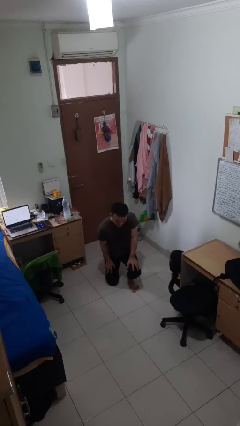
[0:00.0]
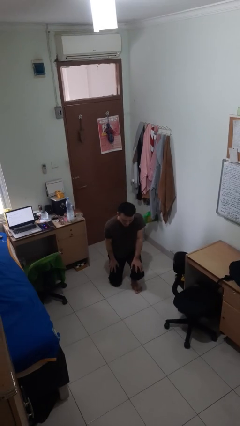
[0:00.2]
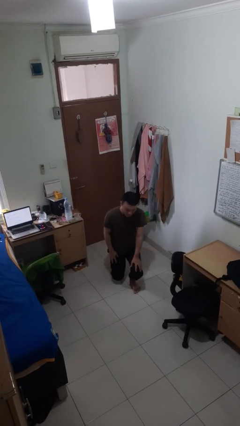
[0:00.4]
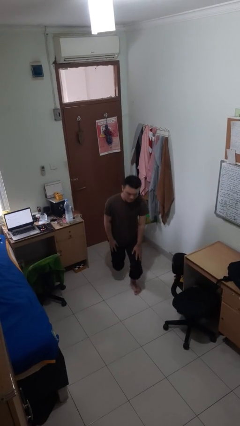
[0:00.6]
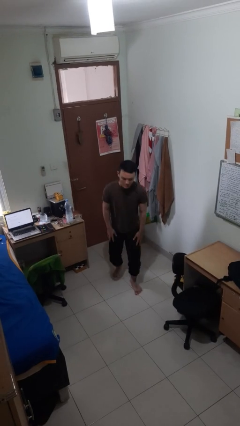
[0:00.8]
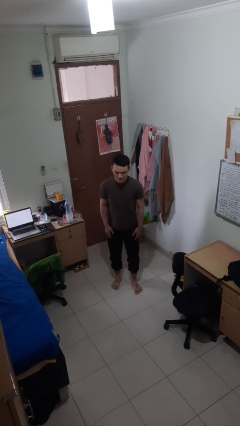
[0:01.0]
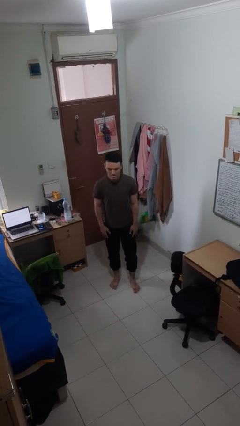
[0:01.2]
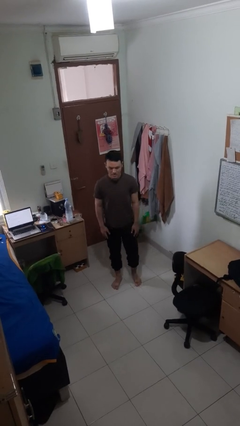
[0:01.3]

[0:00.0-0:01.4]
person stands up from floor

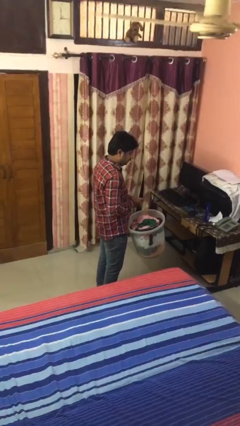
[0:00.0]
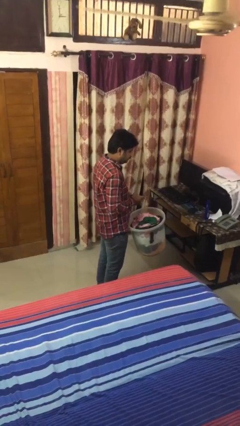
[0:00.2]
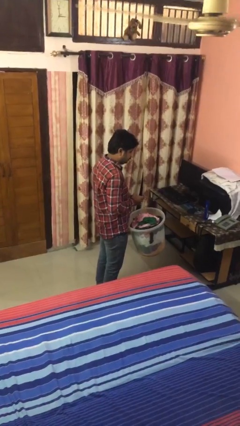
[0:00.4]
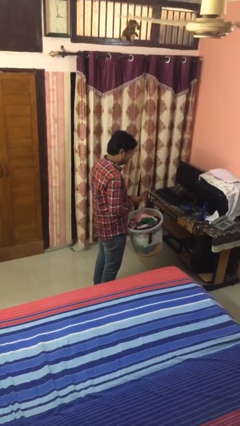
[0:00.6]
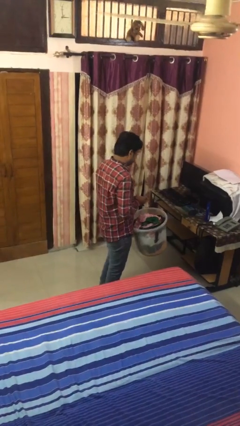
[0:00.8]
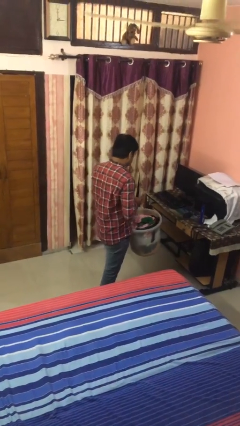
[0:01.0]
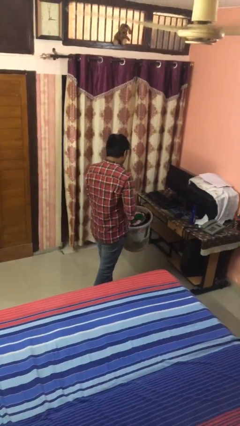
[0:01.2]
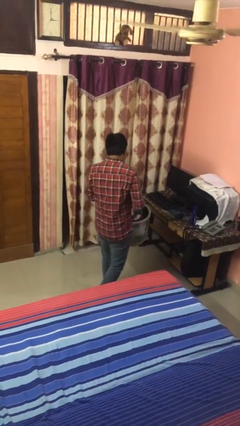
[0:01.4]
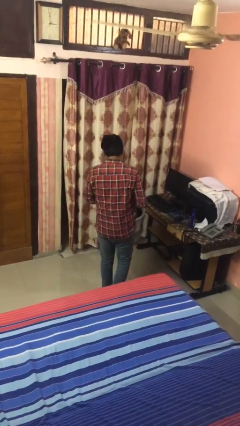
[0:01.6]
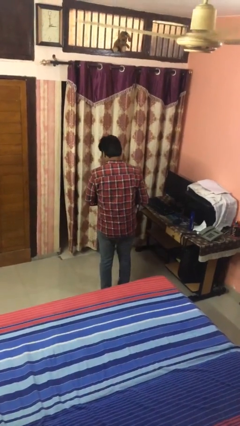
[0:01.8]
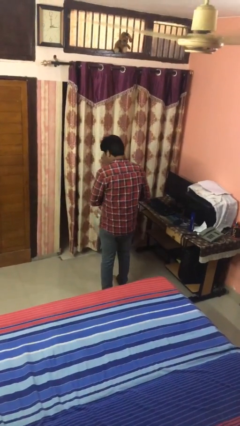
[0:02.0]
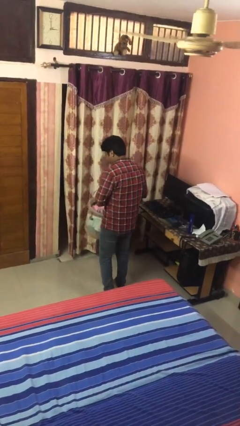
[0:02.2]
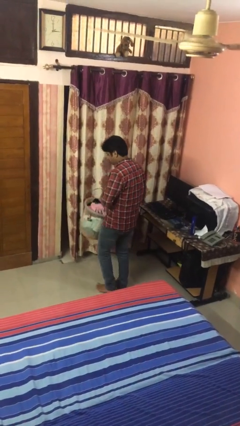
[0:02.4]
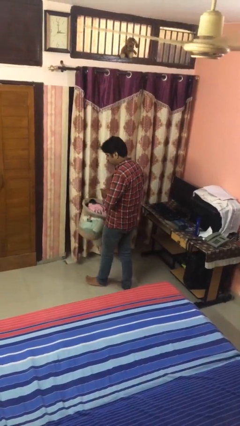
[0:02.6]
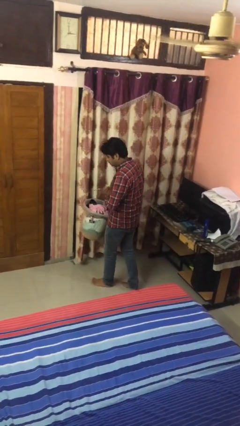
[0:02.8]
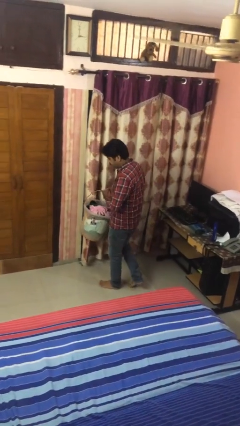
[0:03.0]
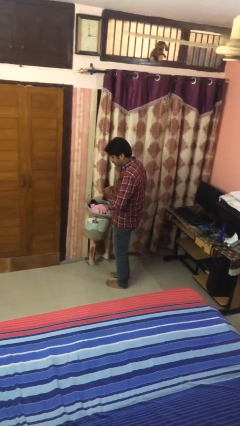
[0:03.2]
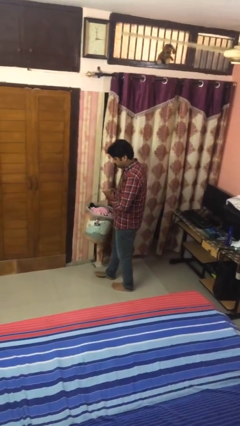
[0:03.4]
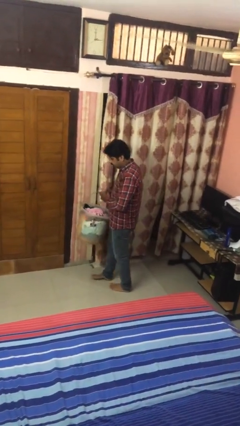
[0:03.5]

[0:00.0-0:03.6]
person carries laundry basket

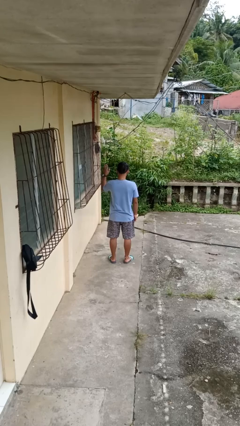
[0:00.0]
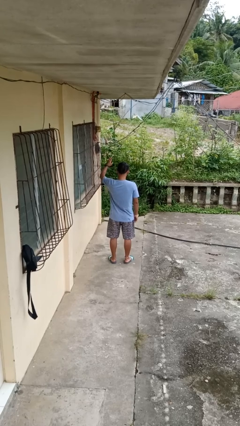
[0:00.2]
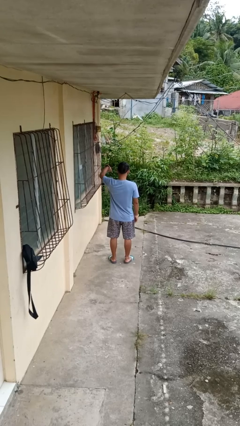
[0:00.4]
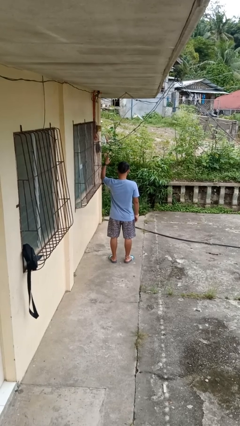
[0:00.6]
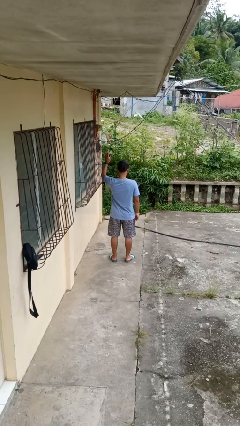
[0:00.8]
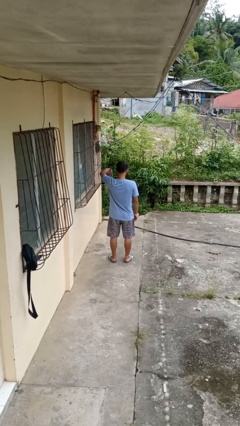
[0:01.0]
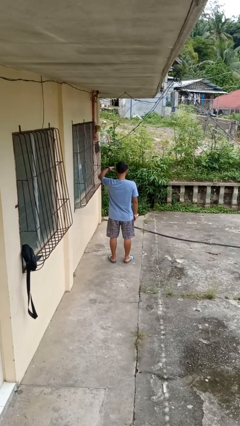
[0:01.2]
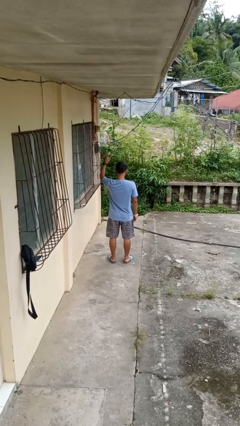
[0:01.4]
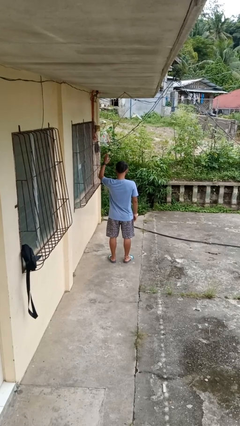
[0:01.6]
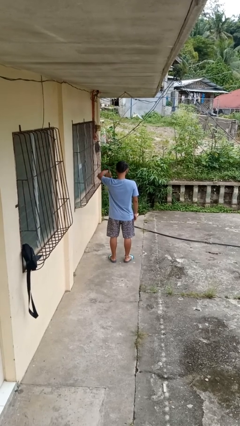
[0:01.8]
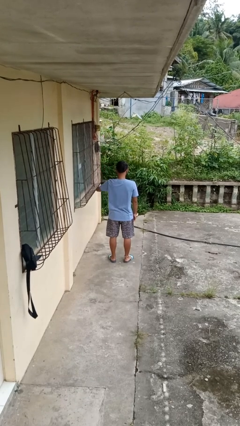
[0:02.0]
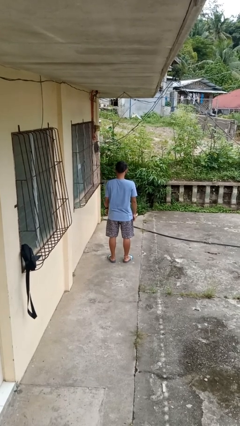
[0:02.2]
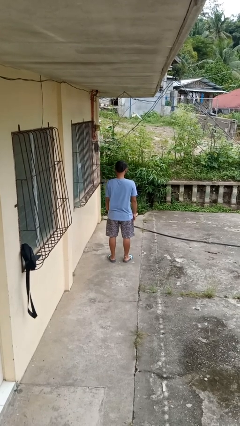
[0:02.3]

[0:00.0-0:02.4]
person gestures come here

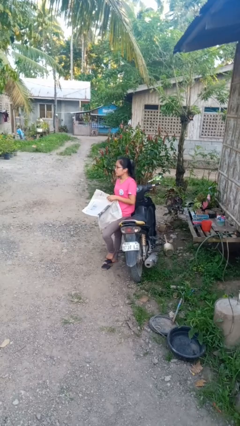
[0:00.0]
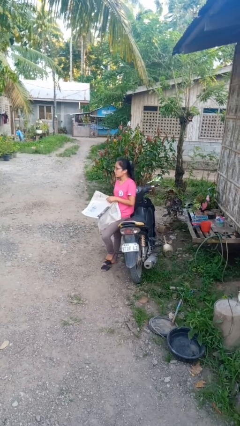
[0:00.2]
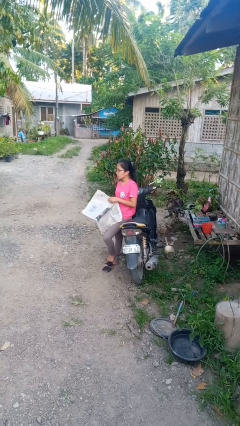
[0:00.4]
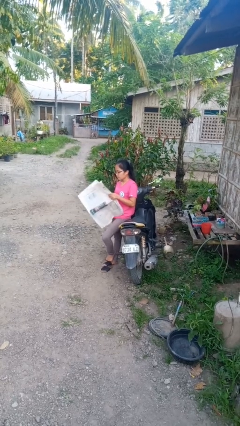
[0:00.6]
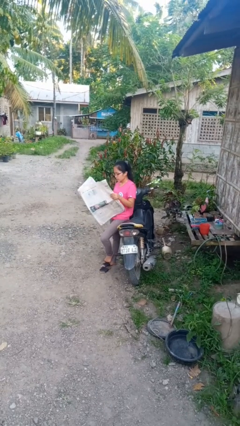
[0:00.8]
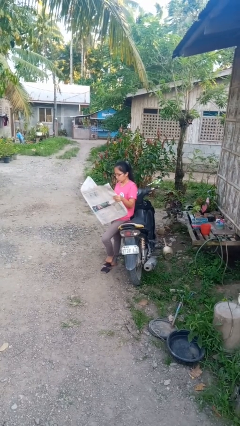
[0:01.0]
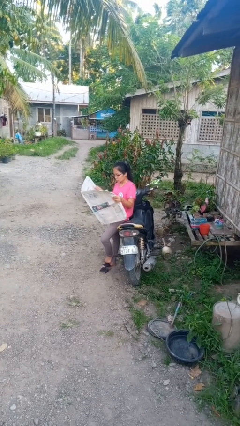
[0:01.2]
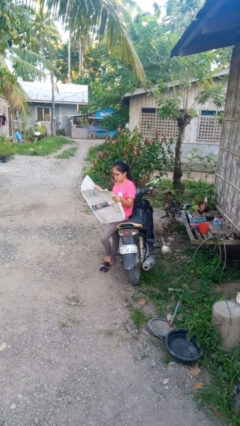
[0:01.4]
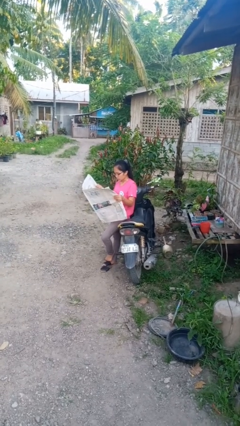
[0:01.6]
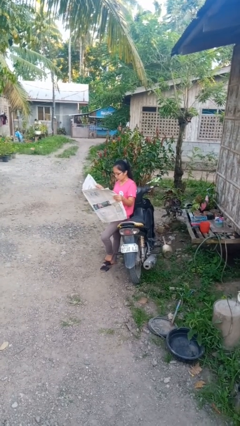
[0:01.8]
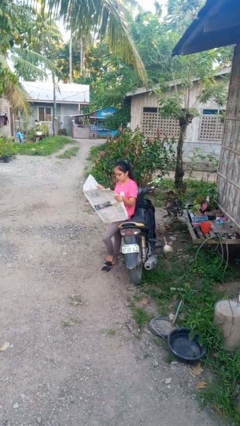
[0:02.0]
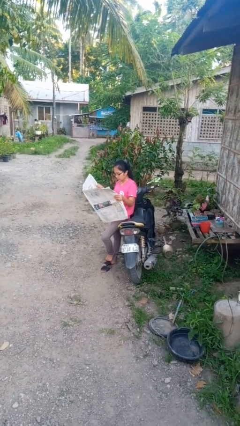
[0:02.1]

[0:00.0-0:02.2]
person reads newspaper

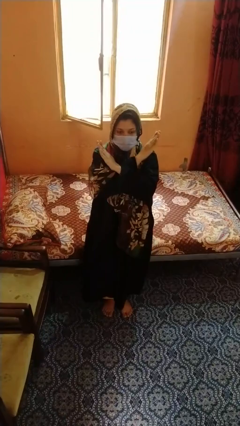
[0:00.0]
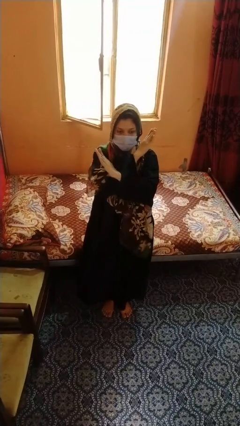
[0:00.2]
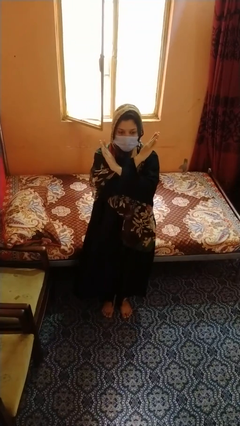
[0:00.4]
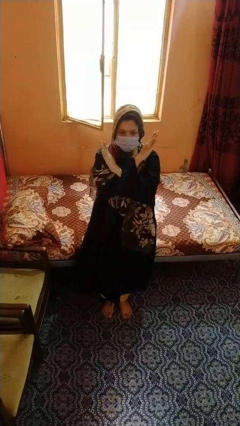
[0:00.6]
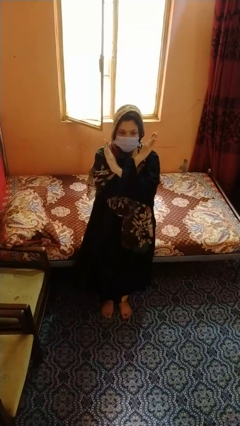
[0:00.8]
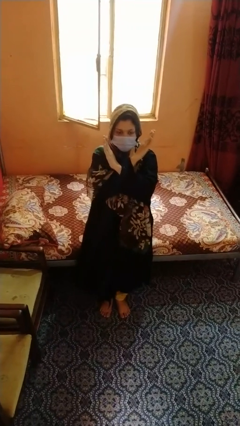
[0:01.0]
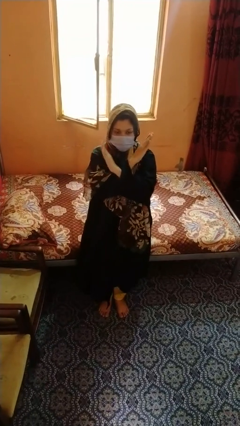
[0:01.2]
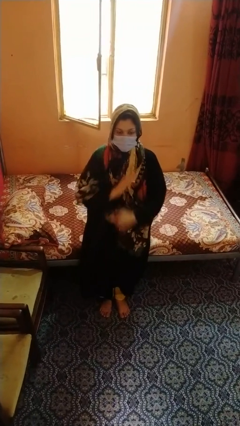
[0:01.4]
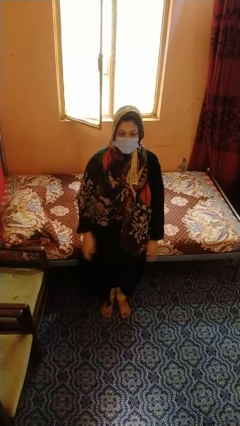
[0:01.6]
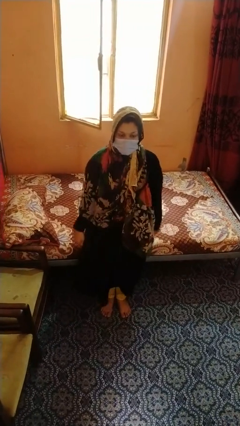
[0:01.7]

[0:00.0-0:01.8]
person gestures arms x

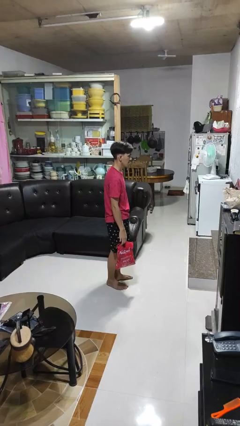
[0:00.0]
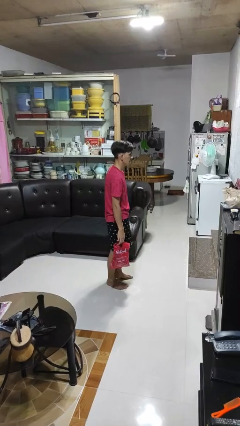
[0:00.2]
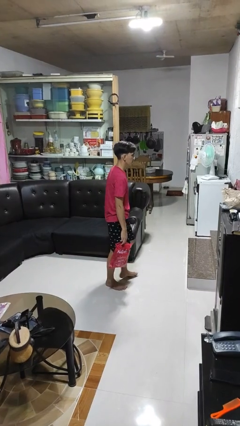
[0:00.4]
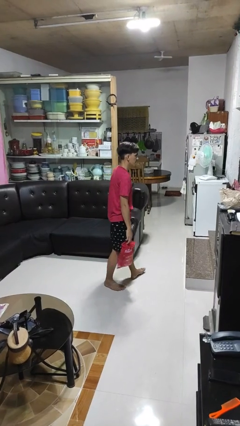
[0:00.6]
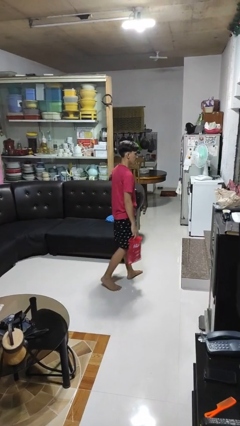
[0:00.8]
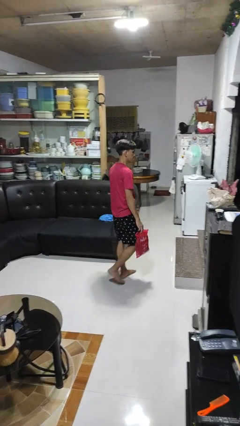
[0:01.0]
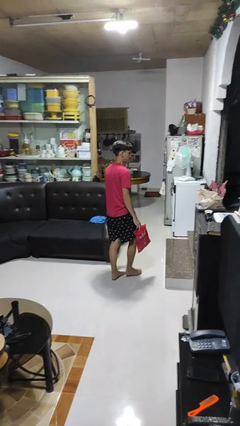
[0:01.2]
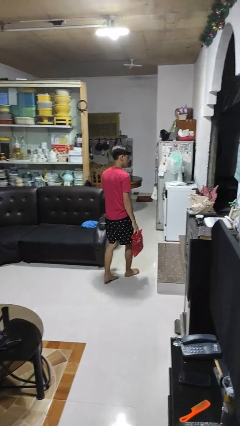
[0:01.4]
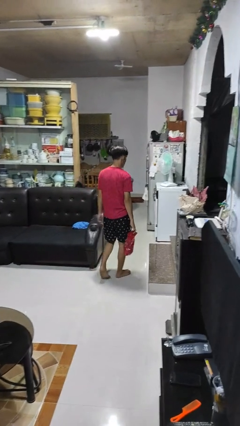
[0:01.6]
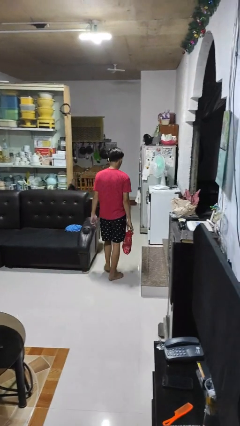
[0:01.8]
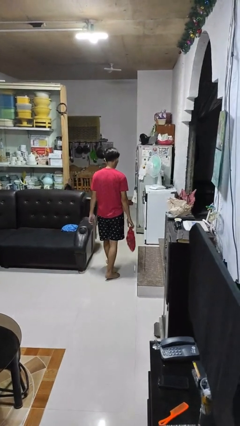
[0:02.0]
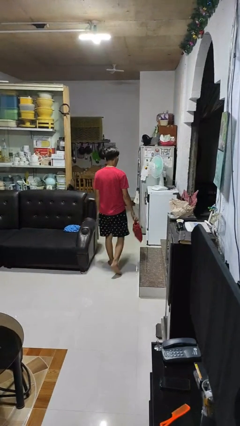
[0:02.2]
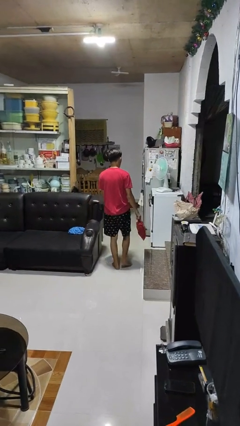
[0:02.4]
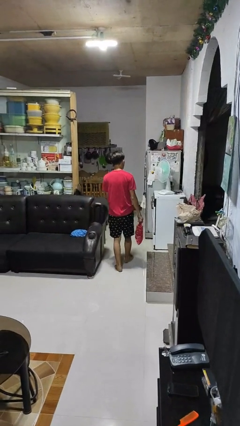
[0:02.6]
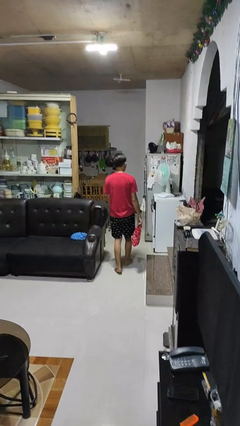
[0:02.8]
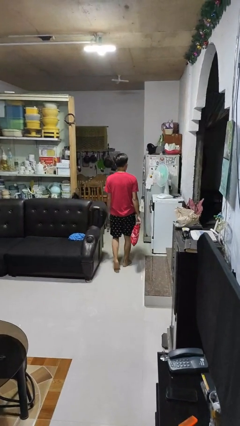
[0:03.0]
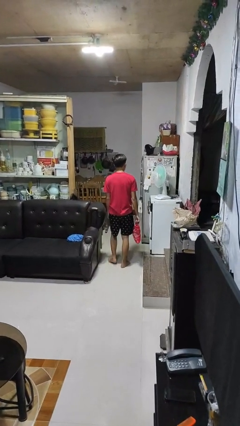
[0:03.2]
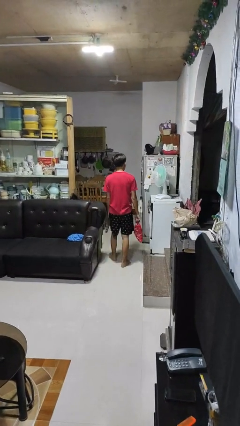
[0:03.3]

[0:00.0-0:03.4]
person carries groceries

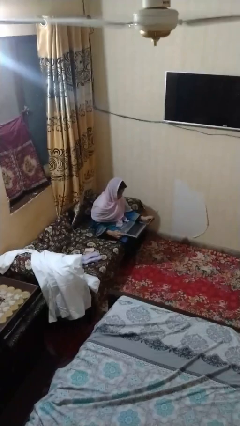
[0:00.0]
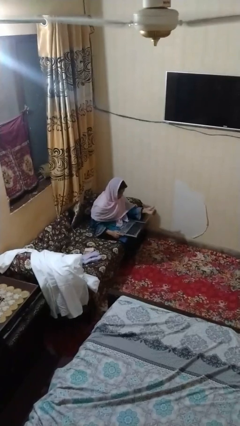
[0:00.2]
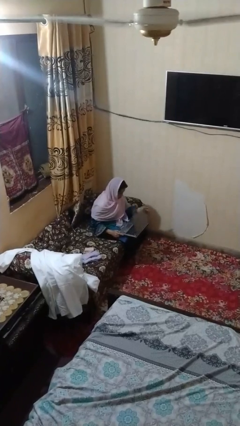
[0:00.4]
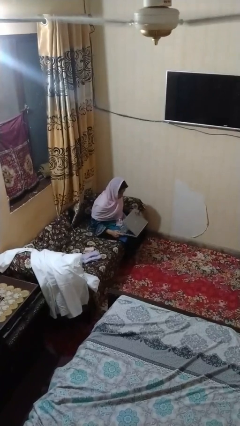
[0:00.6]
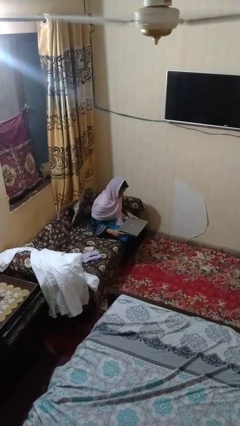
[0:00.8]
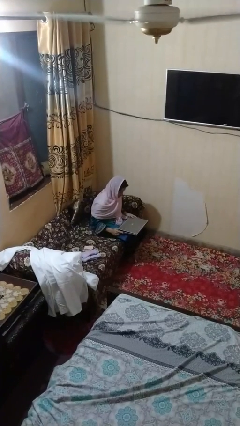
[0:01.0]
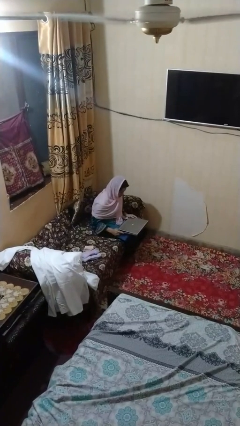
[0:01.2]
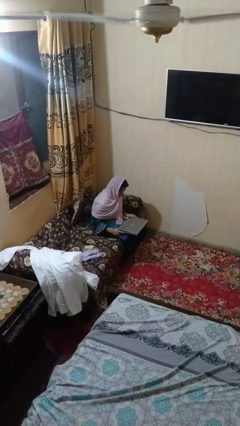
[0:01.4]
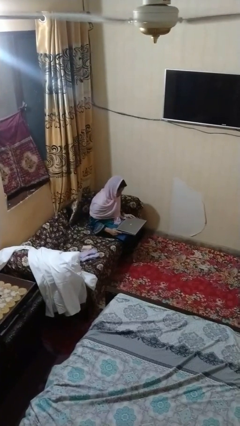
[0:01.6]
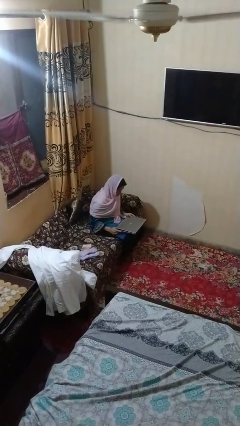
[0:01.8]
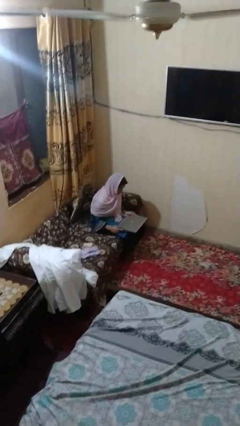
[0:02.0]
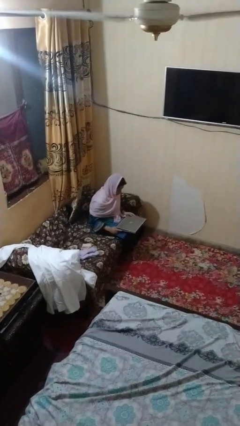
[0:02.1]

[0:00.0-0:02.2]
person closes laptop
